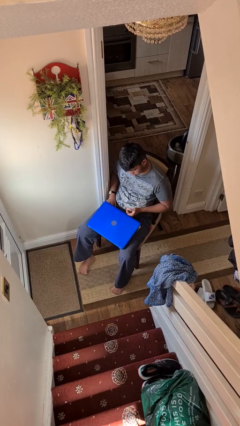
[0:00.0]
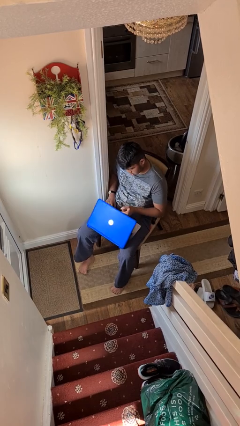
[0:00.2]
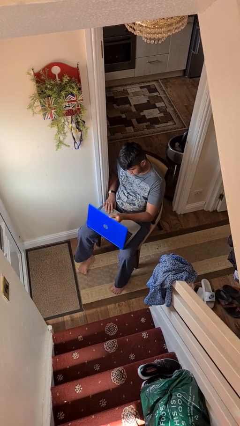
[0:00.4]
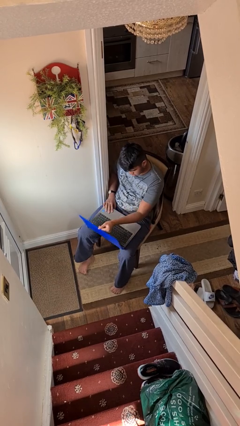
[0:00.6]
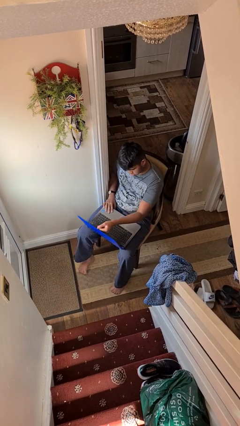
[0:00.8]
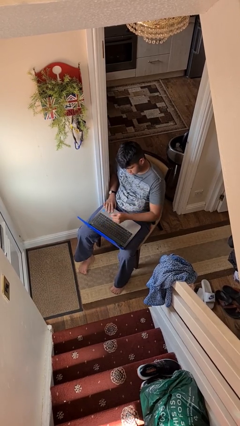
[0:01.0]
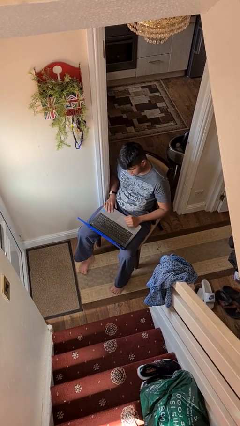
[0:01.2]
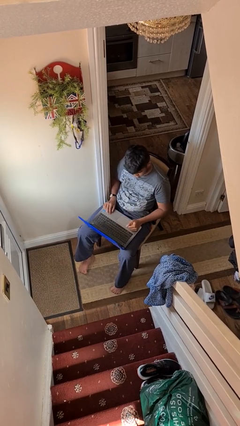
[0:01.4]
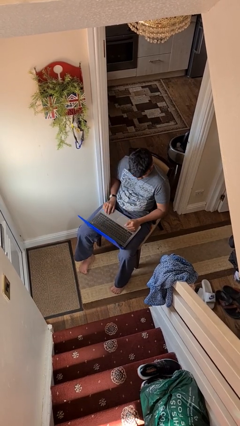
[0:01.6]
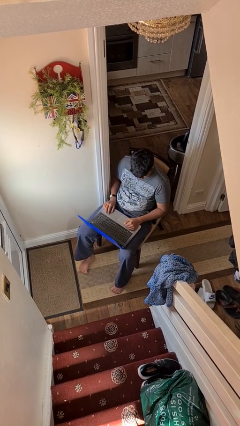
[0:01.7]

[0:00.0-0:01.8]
person opens laptop

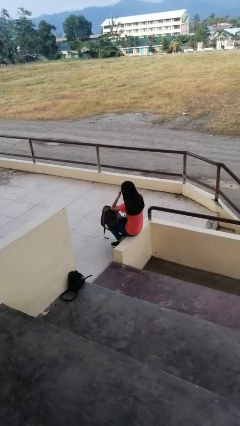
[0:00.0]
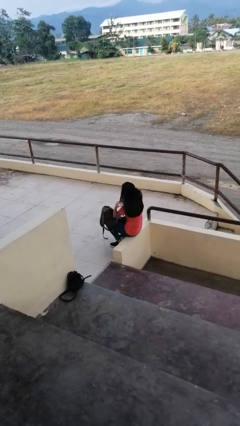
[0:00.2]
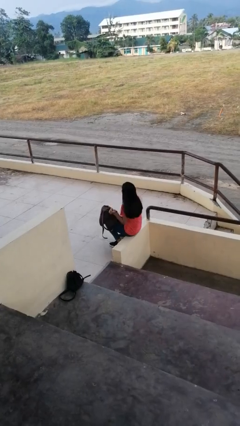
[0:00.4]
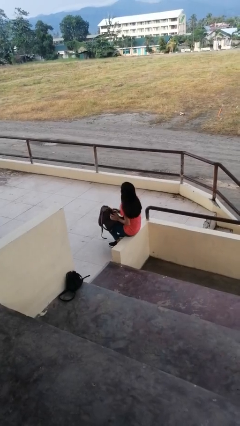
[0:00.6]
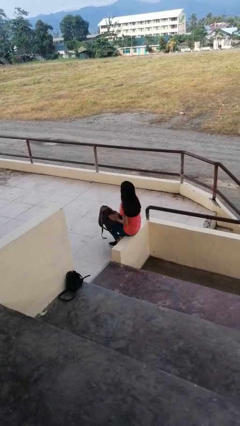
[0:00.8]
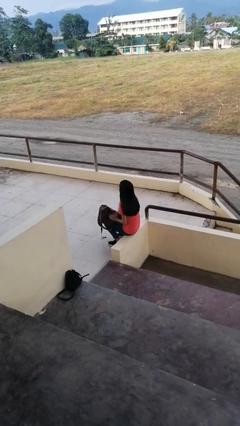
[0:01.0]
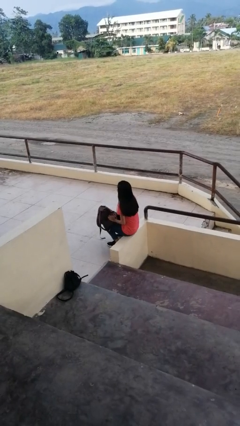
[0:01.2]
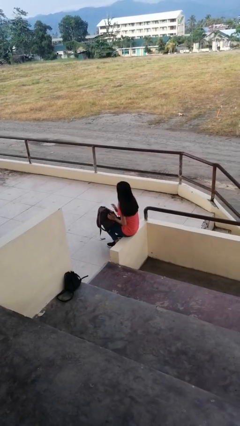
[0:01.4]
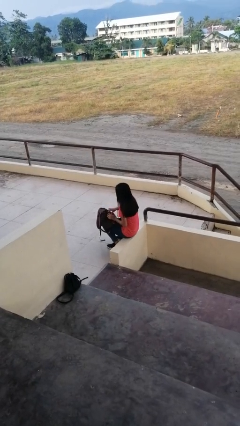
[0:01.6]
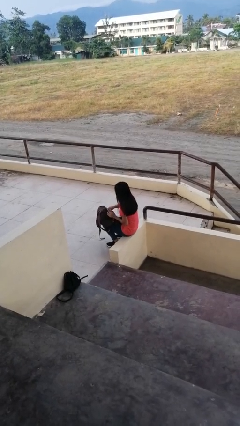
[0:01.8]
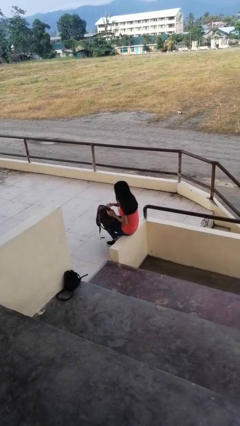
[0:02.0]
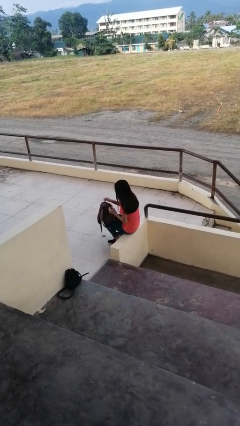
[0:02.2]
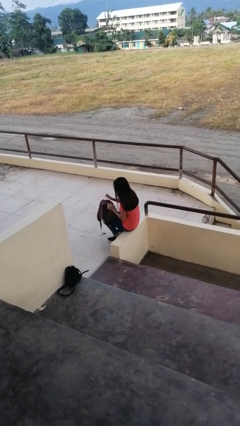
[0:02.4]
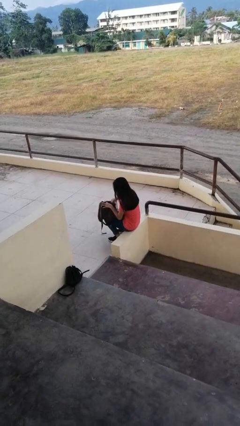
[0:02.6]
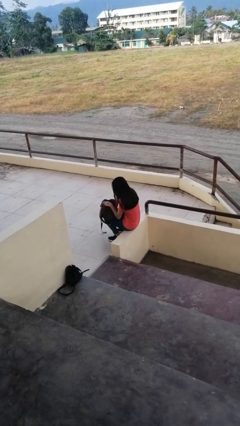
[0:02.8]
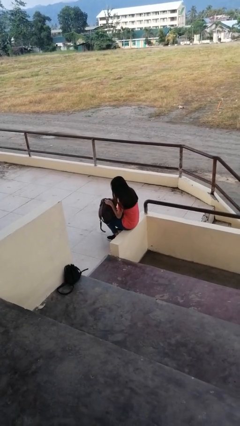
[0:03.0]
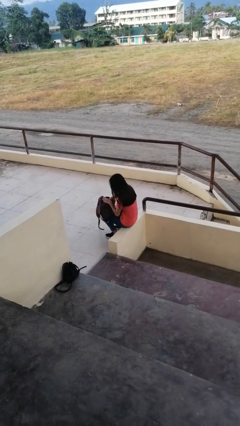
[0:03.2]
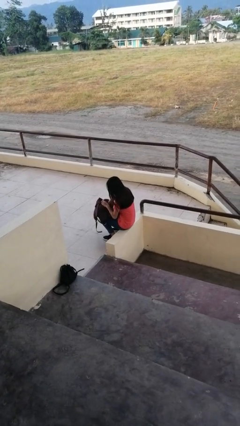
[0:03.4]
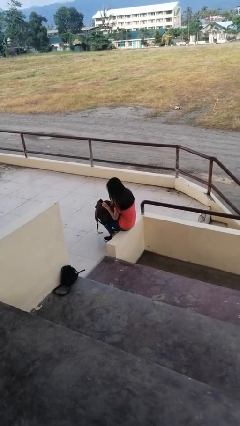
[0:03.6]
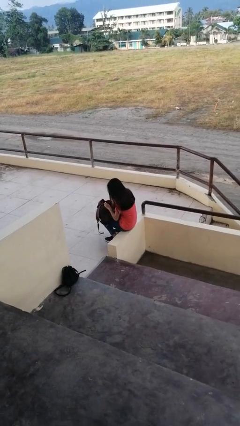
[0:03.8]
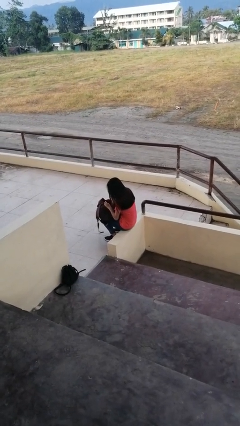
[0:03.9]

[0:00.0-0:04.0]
person searches in backpack

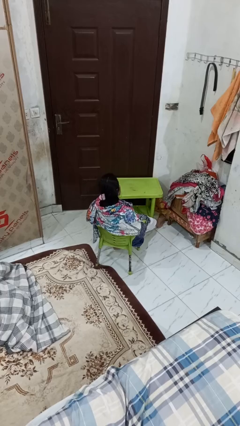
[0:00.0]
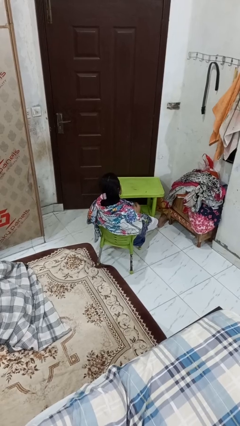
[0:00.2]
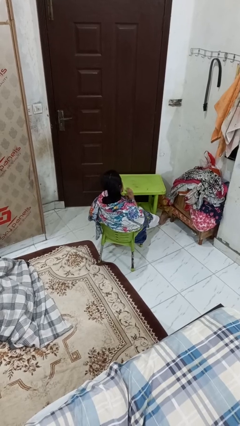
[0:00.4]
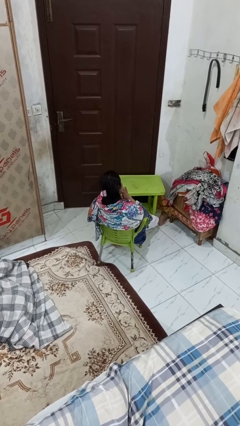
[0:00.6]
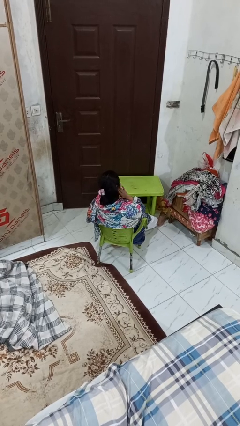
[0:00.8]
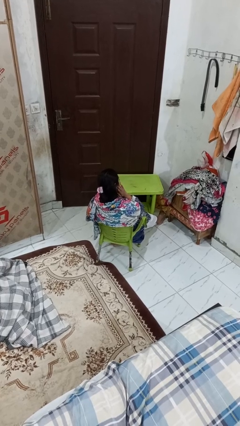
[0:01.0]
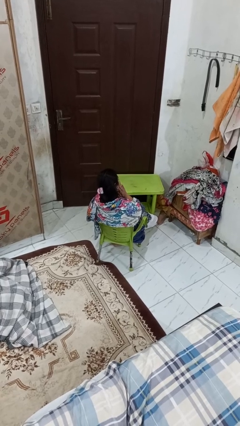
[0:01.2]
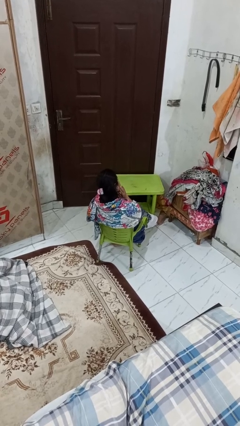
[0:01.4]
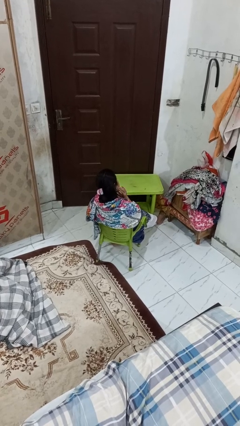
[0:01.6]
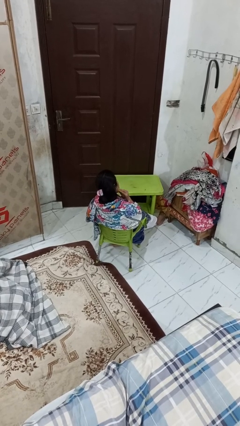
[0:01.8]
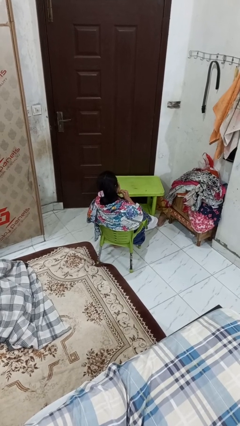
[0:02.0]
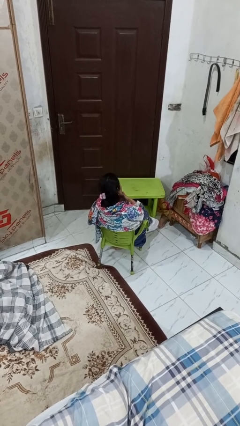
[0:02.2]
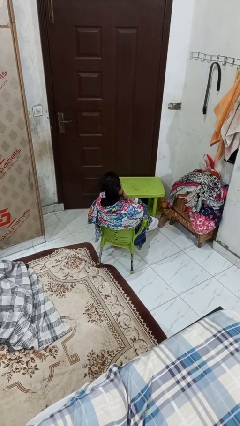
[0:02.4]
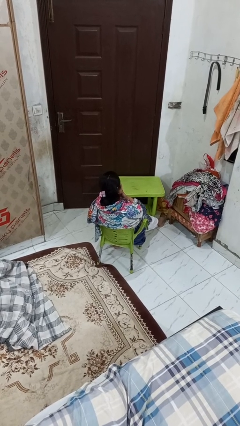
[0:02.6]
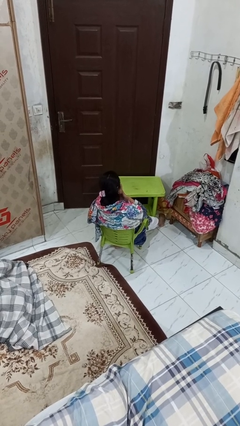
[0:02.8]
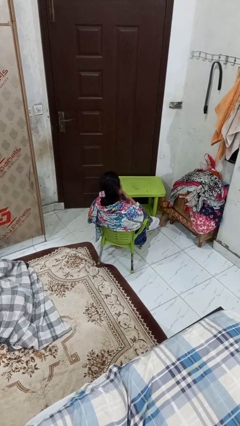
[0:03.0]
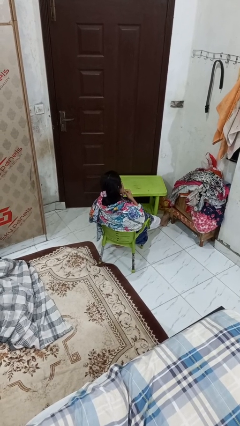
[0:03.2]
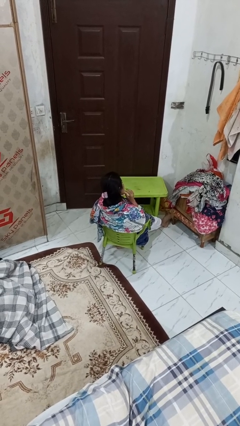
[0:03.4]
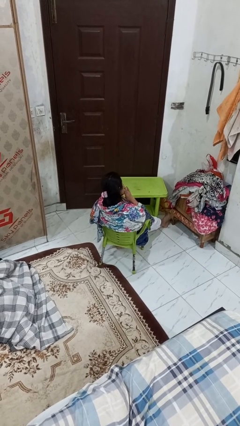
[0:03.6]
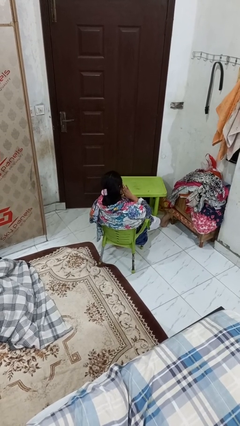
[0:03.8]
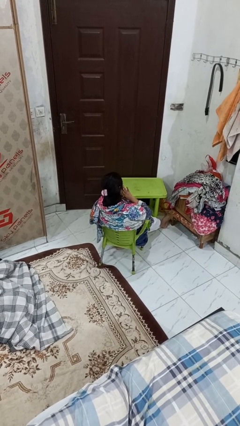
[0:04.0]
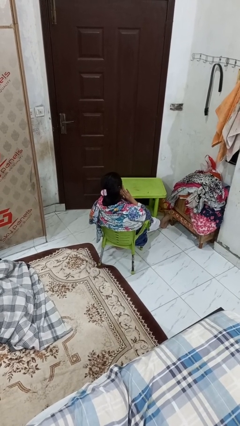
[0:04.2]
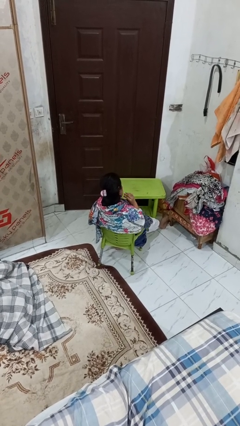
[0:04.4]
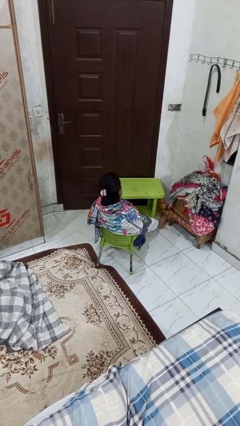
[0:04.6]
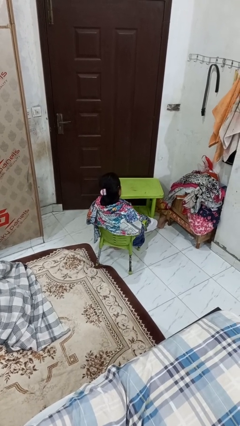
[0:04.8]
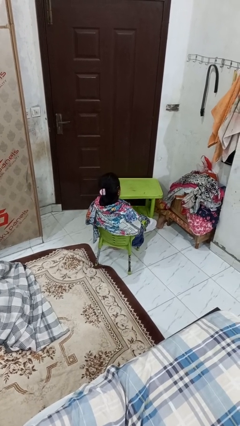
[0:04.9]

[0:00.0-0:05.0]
person strokes chin

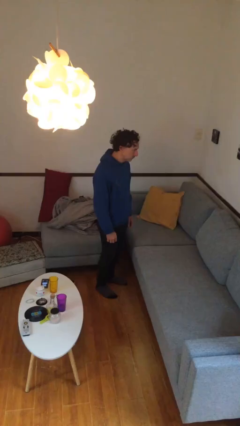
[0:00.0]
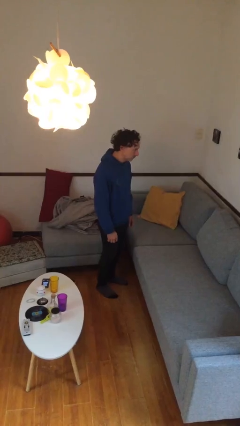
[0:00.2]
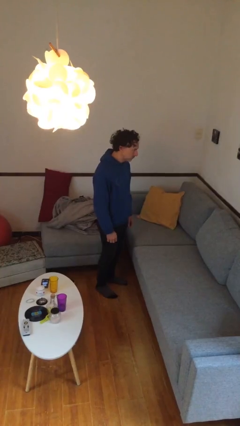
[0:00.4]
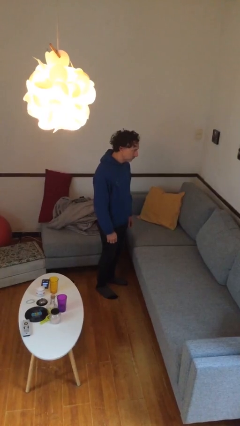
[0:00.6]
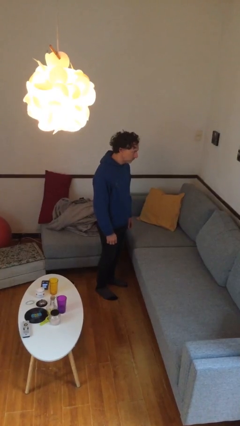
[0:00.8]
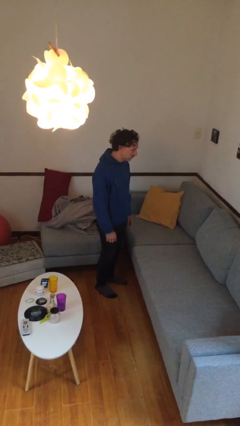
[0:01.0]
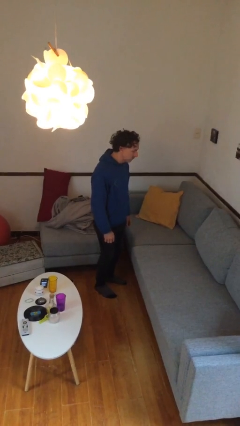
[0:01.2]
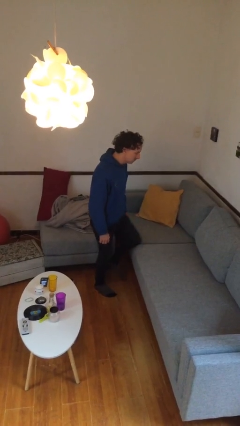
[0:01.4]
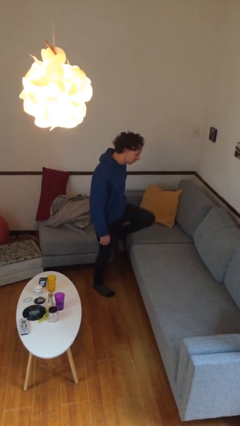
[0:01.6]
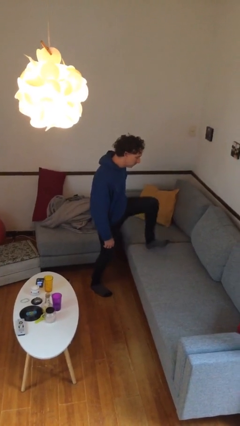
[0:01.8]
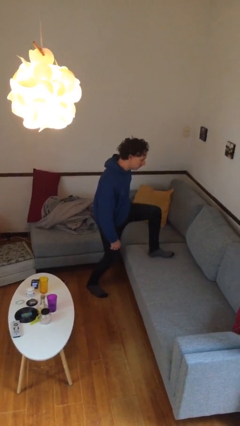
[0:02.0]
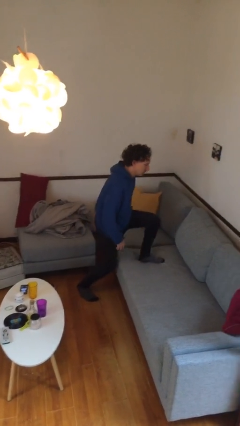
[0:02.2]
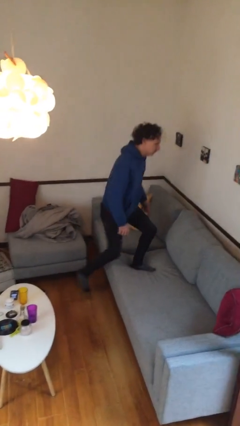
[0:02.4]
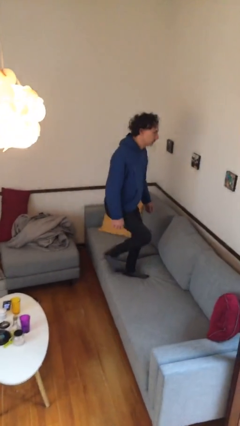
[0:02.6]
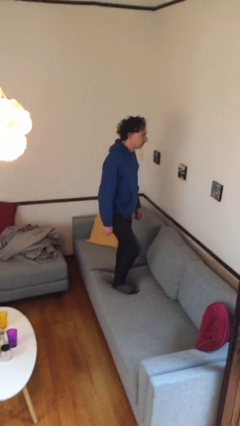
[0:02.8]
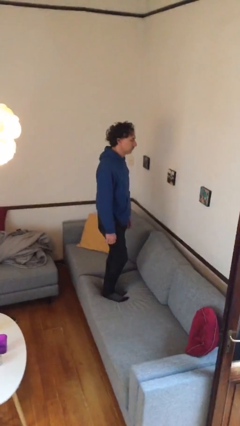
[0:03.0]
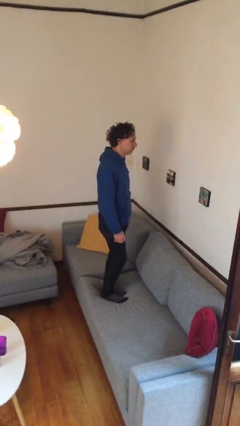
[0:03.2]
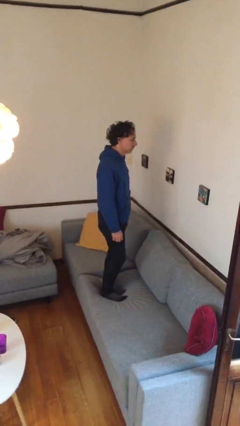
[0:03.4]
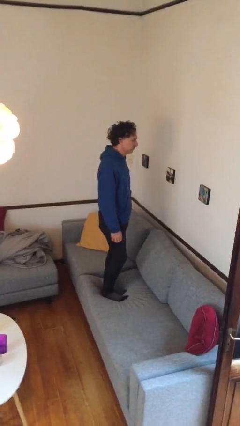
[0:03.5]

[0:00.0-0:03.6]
person climbs on couch

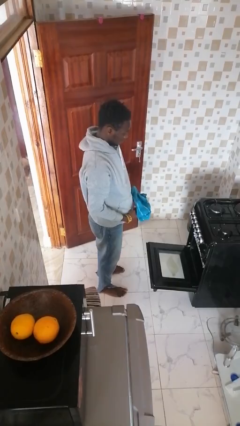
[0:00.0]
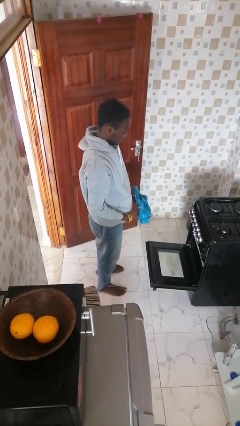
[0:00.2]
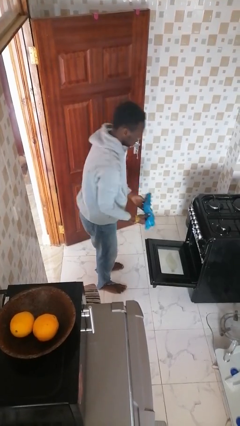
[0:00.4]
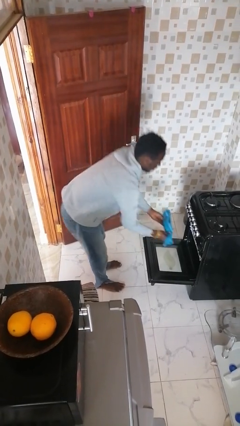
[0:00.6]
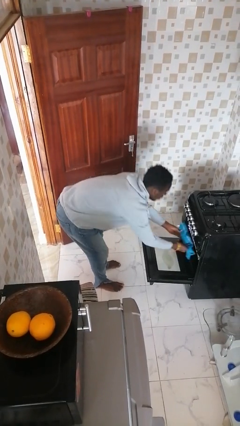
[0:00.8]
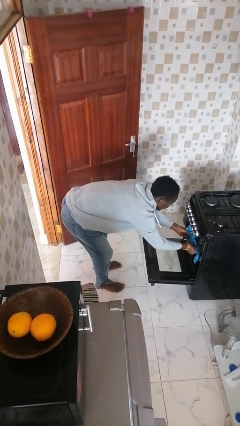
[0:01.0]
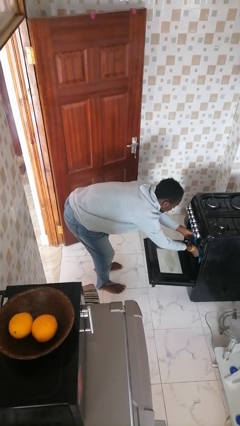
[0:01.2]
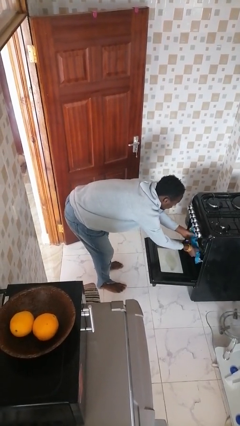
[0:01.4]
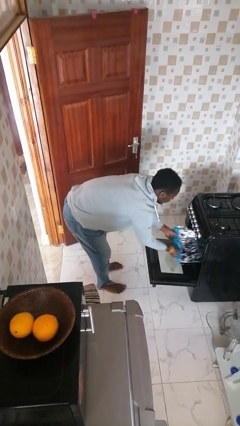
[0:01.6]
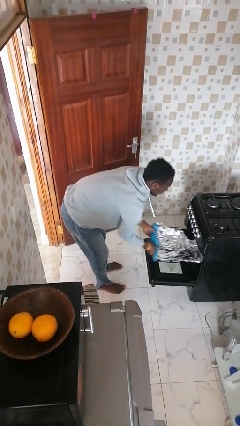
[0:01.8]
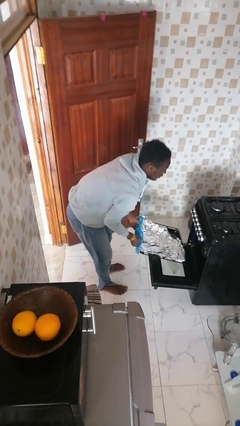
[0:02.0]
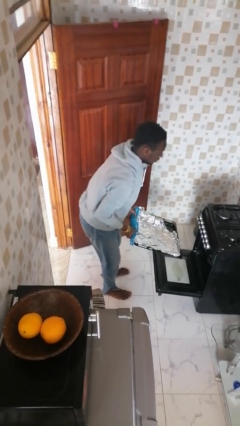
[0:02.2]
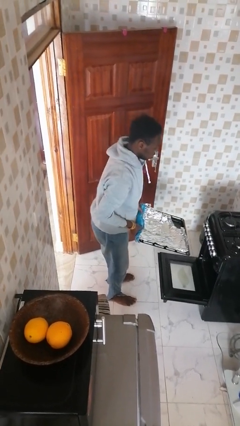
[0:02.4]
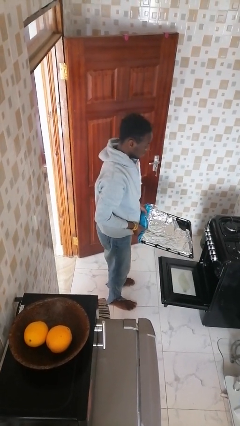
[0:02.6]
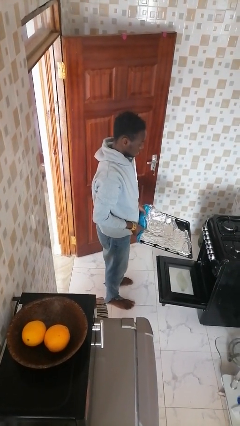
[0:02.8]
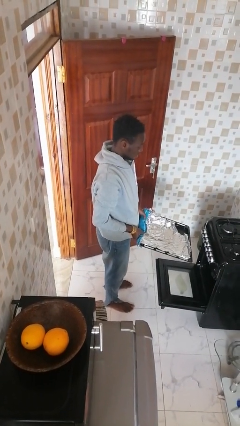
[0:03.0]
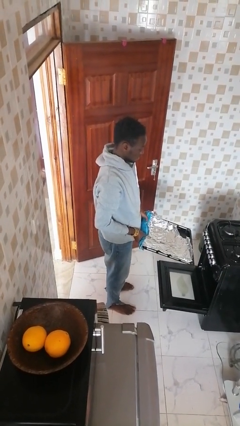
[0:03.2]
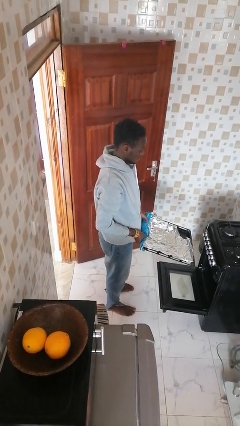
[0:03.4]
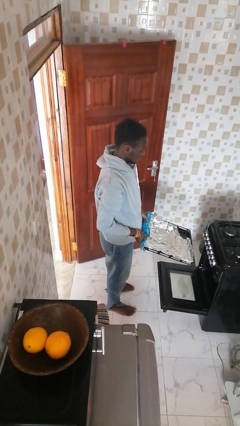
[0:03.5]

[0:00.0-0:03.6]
person takes object from oven
